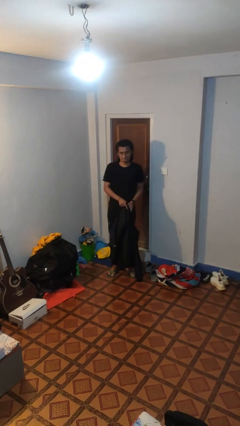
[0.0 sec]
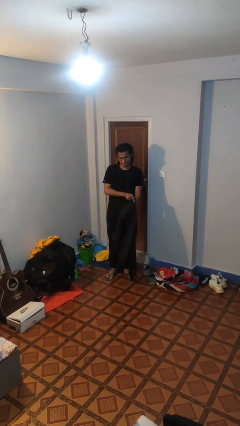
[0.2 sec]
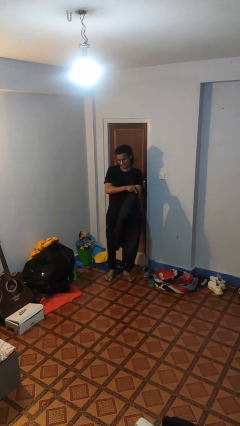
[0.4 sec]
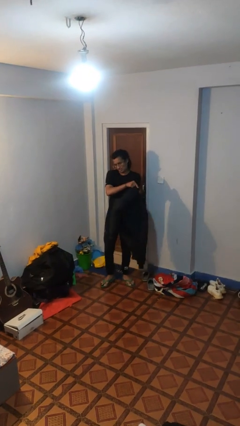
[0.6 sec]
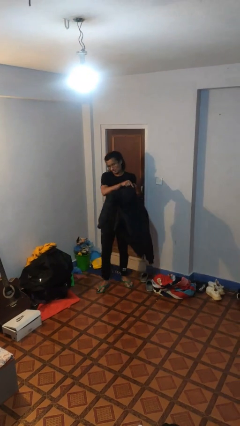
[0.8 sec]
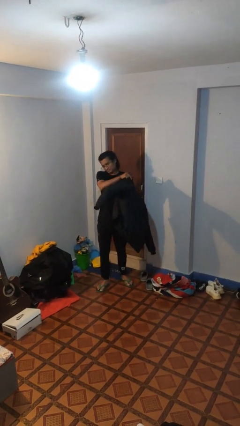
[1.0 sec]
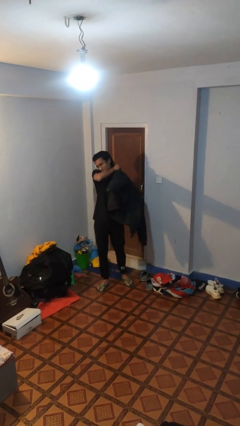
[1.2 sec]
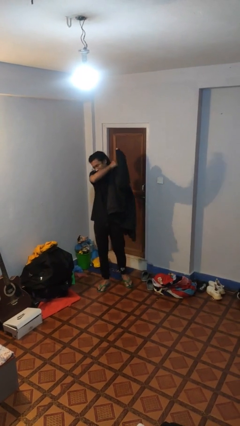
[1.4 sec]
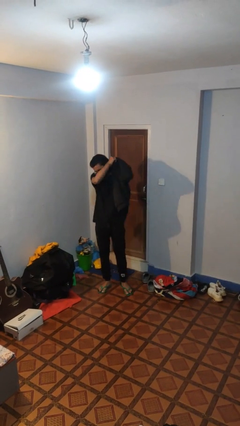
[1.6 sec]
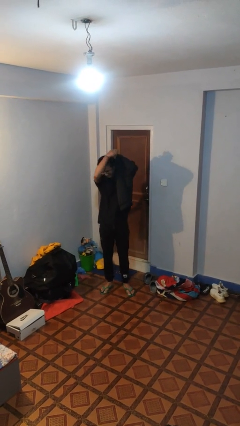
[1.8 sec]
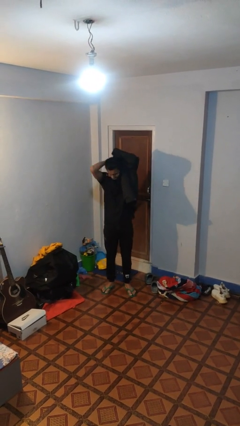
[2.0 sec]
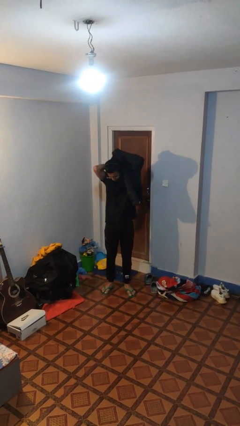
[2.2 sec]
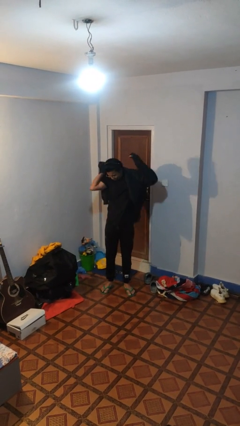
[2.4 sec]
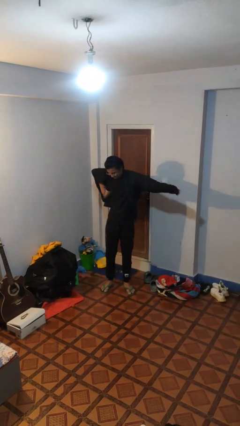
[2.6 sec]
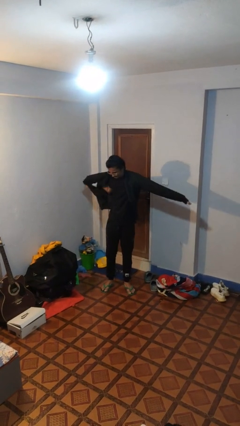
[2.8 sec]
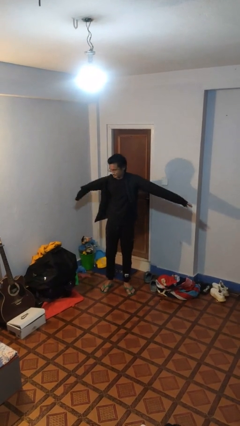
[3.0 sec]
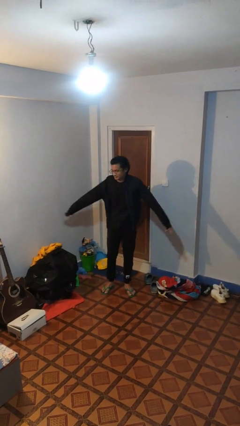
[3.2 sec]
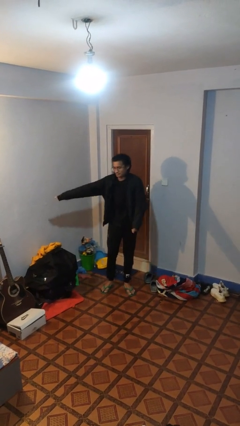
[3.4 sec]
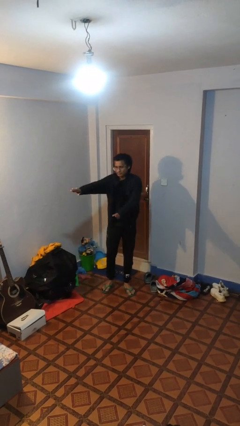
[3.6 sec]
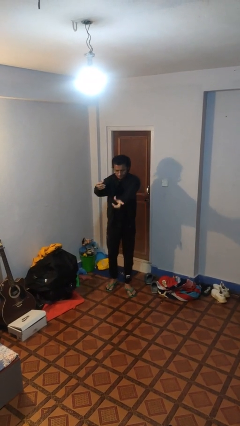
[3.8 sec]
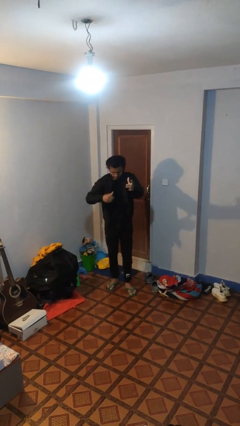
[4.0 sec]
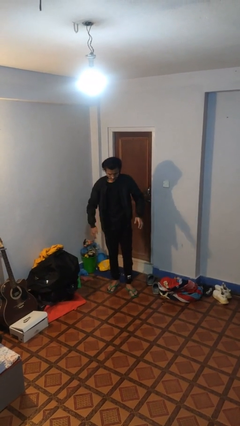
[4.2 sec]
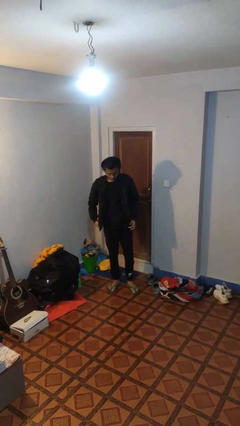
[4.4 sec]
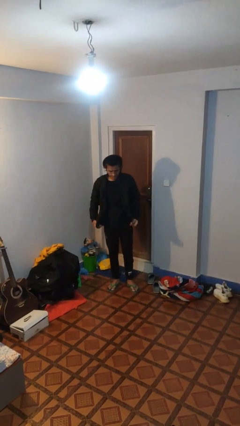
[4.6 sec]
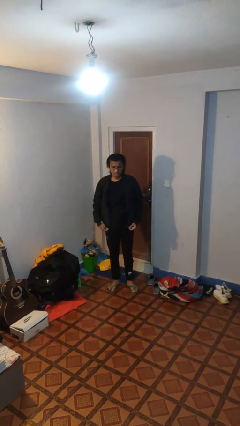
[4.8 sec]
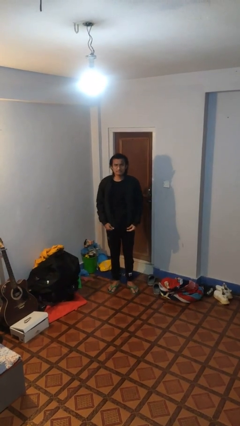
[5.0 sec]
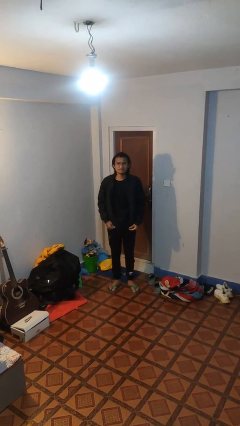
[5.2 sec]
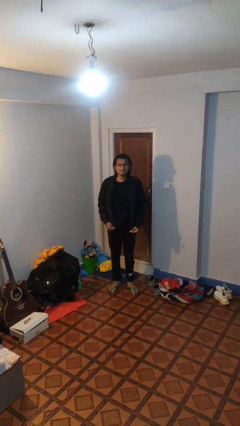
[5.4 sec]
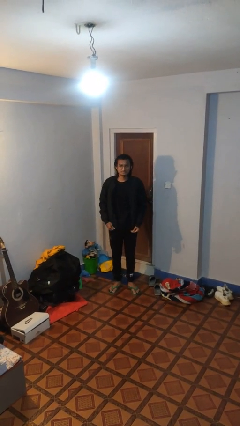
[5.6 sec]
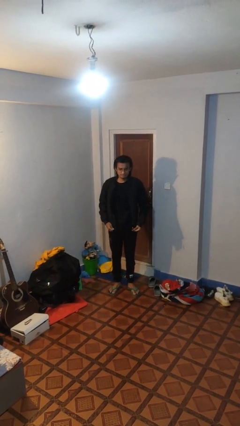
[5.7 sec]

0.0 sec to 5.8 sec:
person puts on jacket

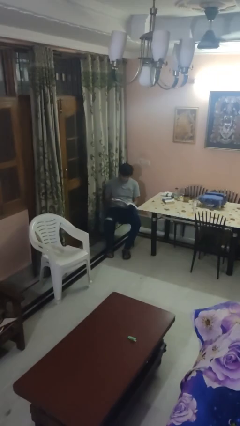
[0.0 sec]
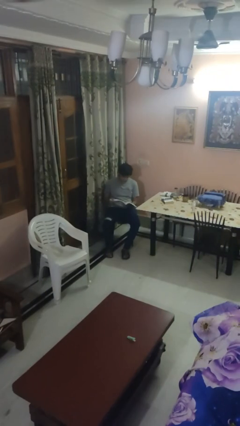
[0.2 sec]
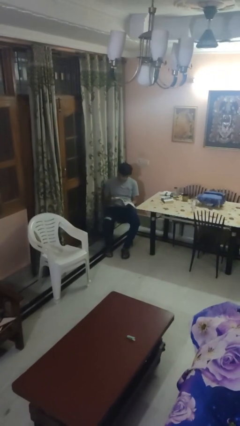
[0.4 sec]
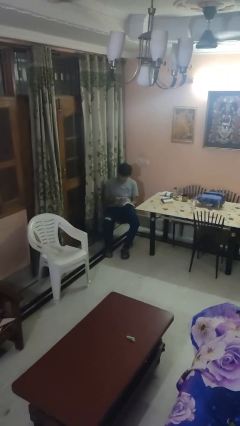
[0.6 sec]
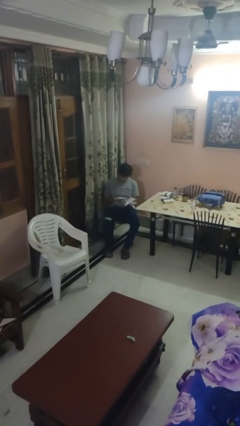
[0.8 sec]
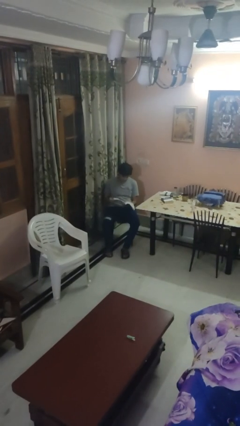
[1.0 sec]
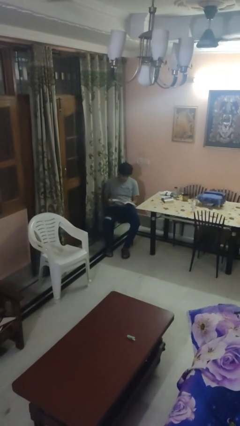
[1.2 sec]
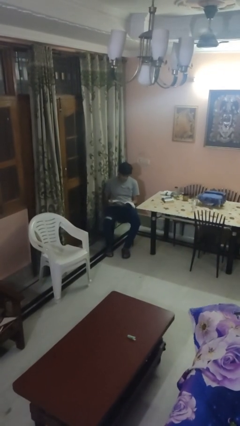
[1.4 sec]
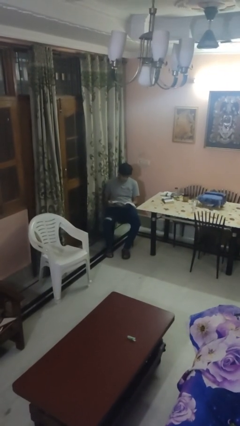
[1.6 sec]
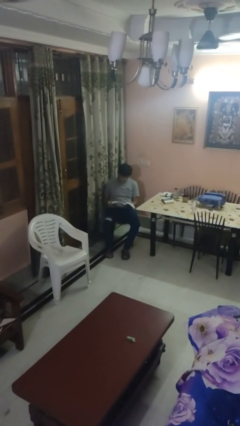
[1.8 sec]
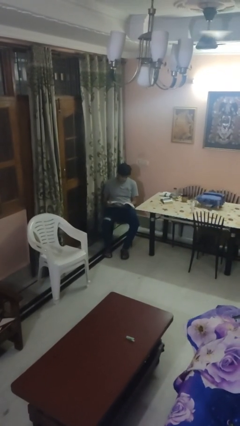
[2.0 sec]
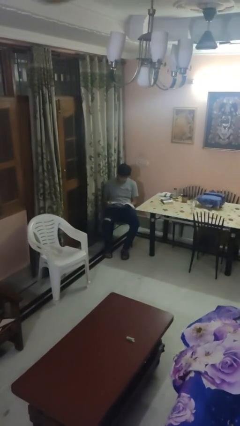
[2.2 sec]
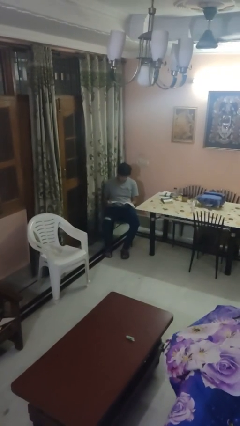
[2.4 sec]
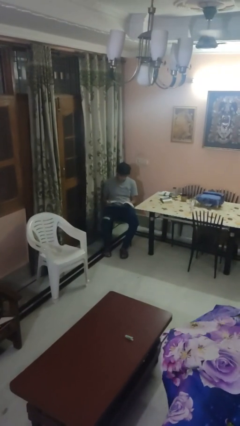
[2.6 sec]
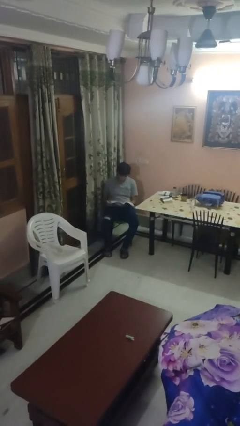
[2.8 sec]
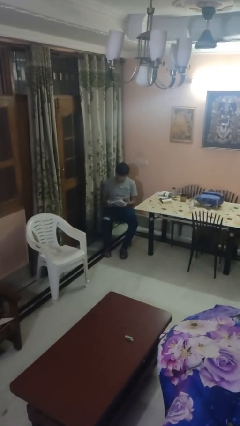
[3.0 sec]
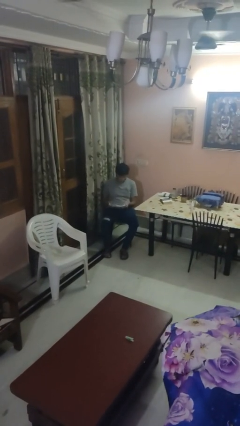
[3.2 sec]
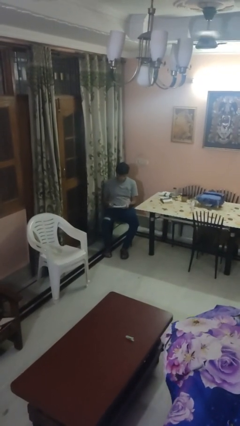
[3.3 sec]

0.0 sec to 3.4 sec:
person reads magazine

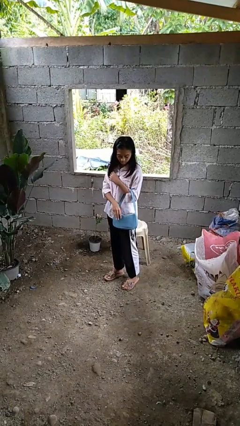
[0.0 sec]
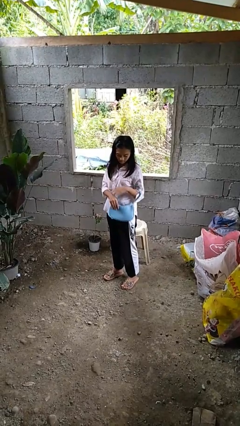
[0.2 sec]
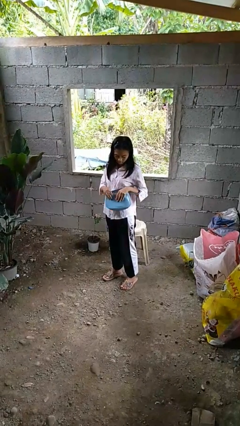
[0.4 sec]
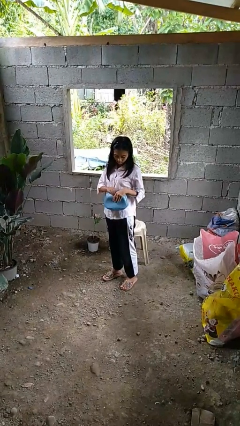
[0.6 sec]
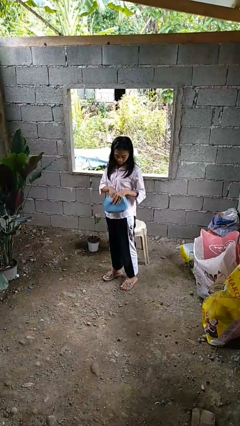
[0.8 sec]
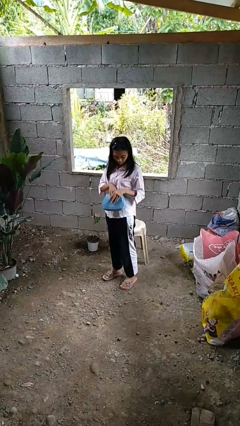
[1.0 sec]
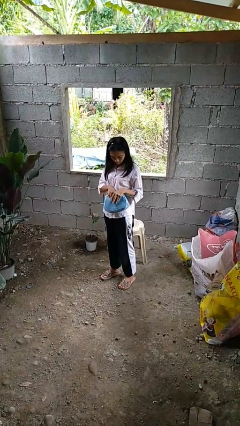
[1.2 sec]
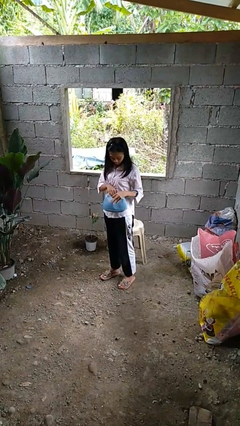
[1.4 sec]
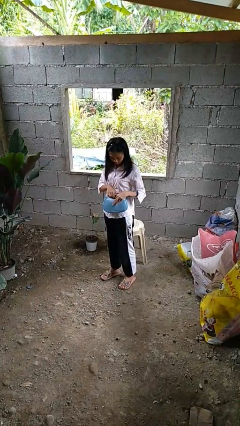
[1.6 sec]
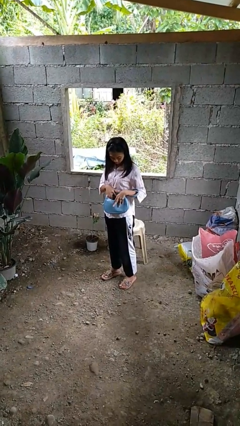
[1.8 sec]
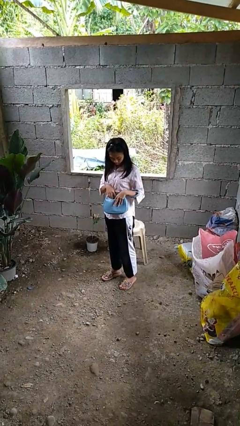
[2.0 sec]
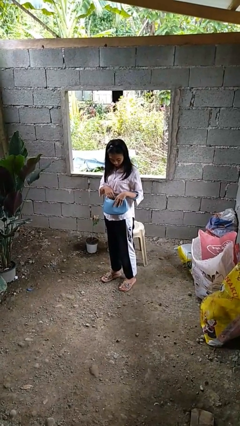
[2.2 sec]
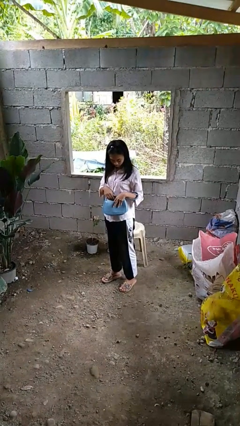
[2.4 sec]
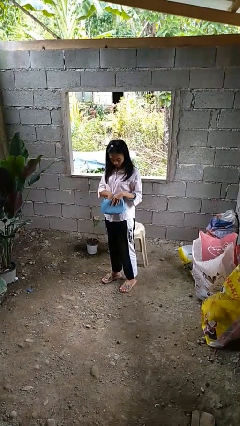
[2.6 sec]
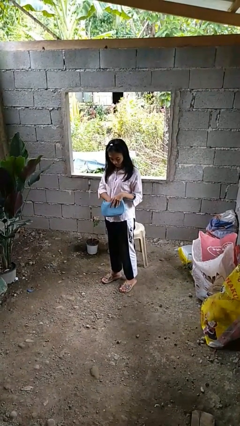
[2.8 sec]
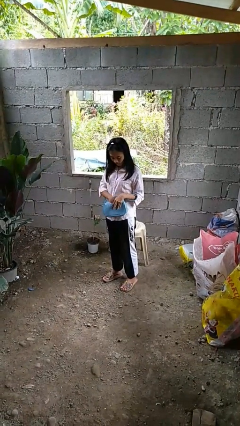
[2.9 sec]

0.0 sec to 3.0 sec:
person searches in purse

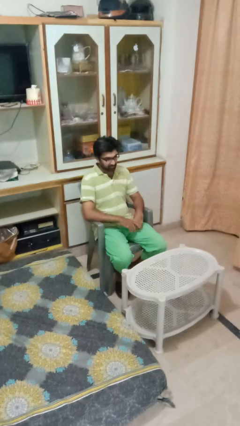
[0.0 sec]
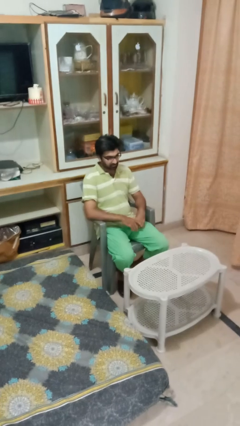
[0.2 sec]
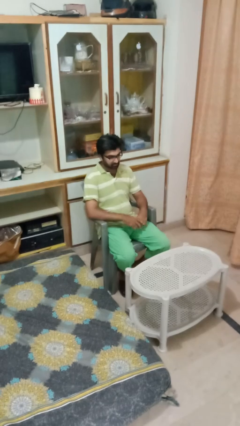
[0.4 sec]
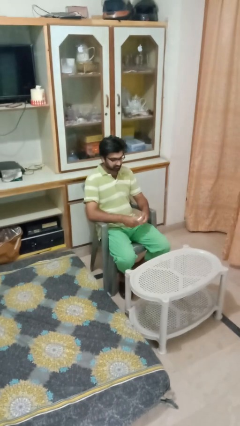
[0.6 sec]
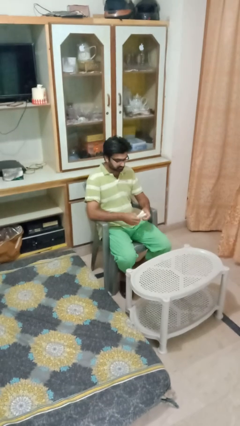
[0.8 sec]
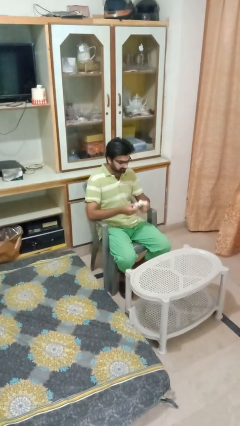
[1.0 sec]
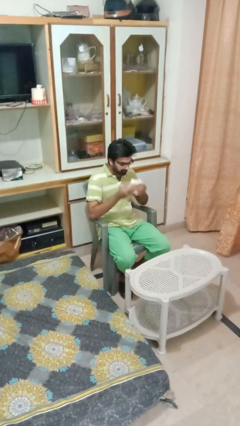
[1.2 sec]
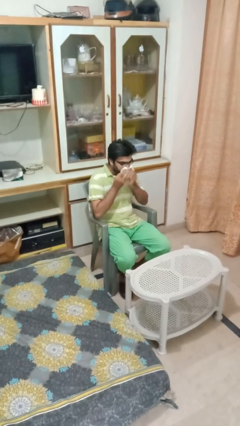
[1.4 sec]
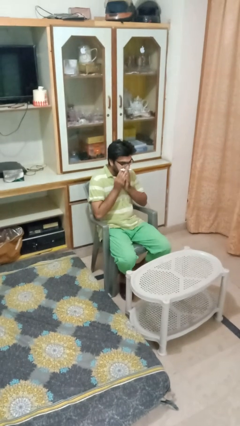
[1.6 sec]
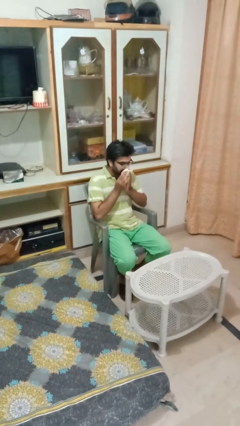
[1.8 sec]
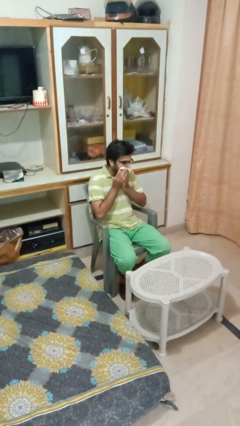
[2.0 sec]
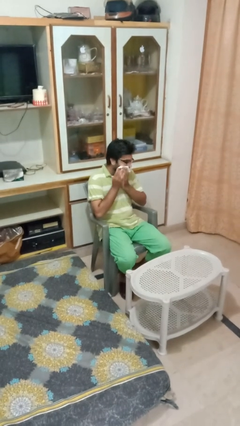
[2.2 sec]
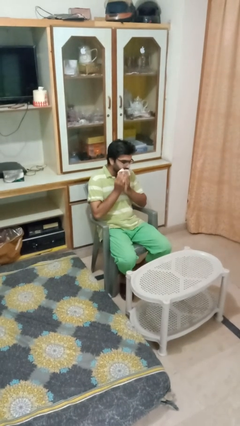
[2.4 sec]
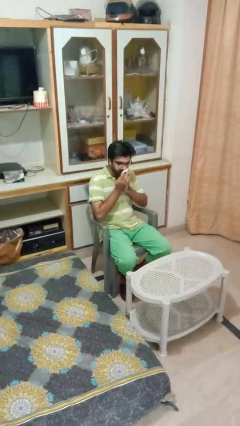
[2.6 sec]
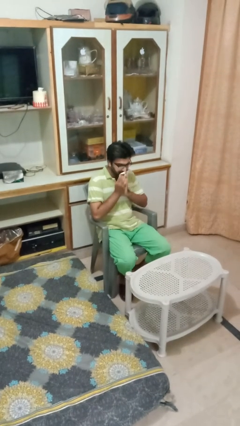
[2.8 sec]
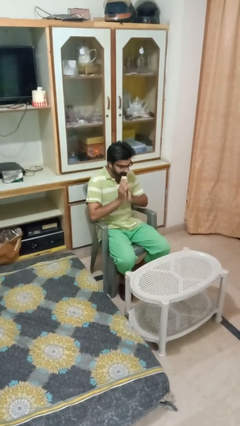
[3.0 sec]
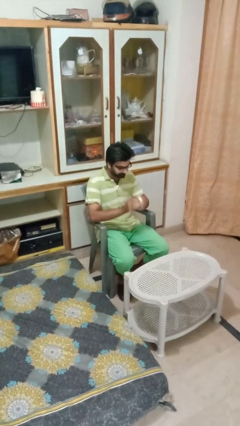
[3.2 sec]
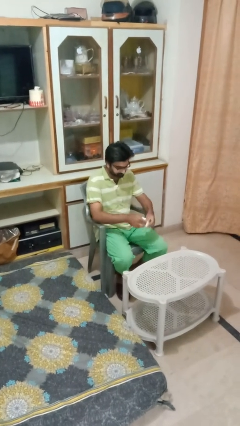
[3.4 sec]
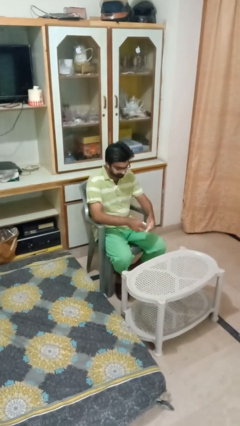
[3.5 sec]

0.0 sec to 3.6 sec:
person wipes mouth with napkin

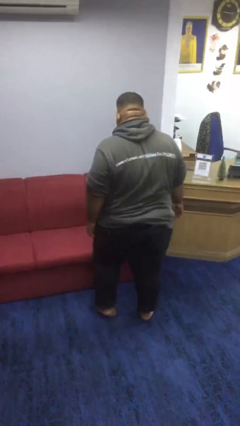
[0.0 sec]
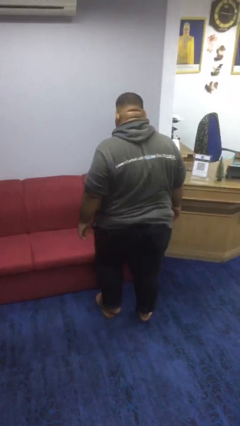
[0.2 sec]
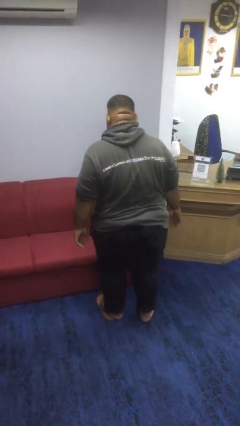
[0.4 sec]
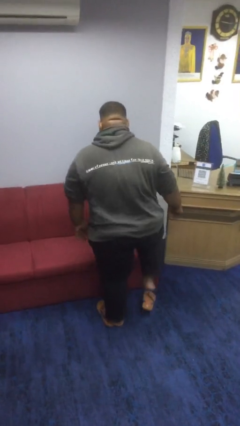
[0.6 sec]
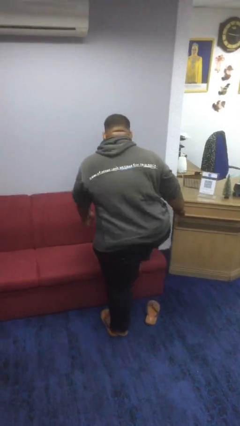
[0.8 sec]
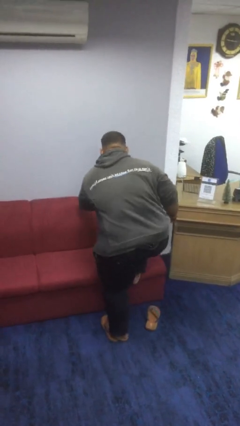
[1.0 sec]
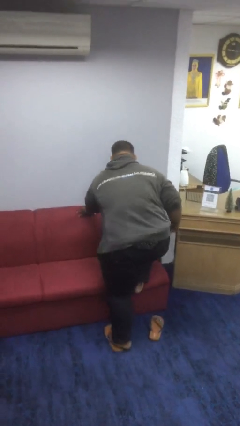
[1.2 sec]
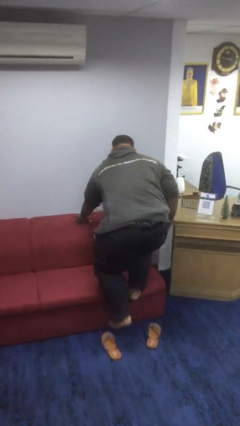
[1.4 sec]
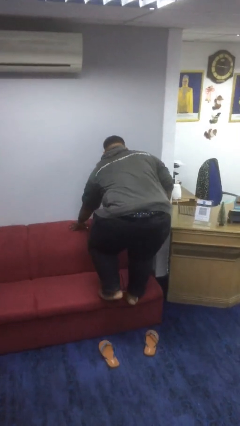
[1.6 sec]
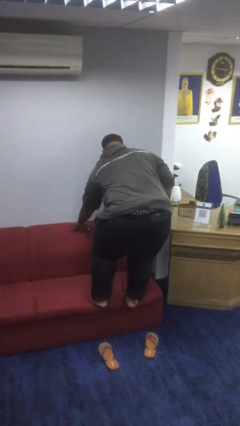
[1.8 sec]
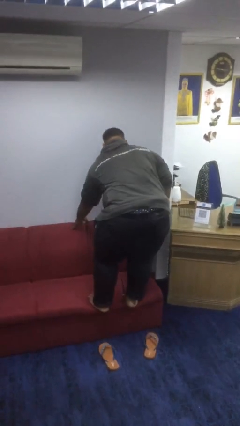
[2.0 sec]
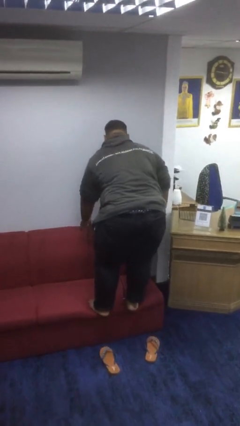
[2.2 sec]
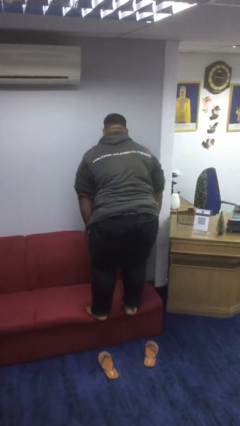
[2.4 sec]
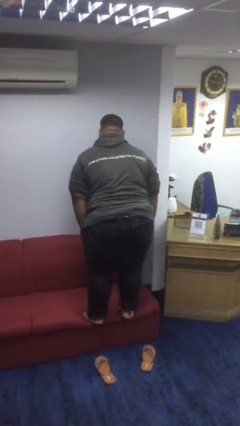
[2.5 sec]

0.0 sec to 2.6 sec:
person climbs on couch
